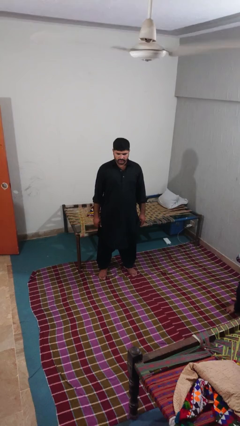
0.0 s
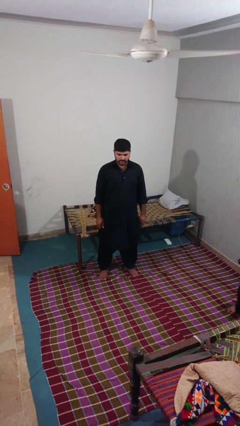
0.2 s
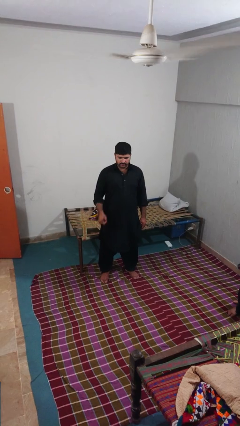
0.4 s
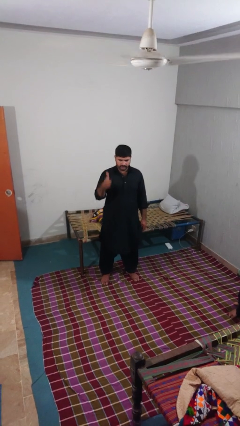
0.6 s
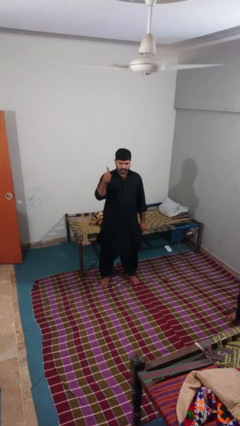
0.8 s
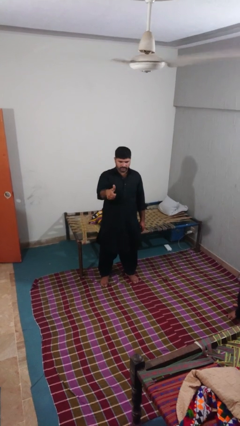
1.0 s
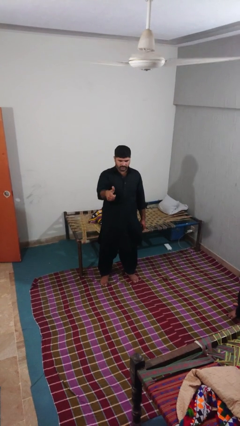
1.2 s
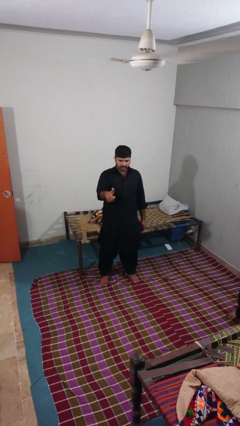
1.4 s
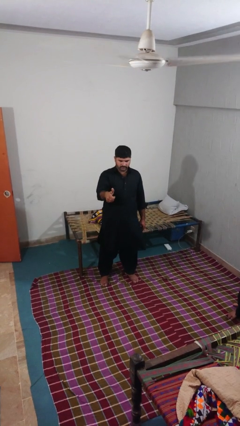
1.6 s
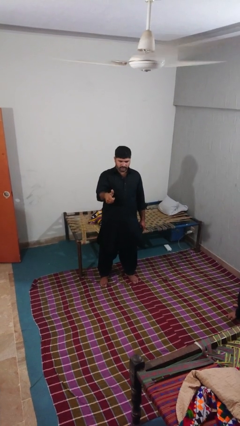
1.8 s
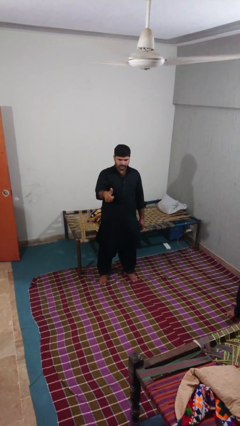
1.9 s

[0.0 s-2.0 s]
person gestures thumbs up

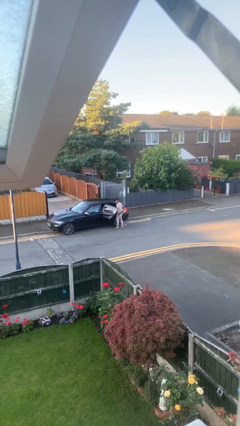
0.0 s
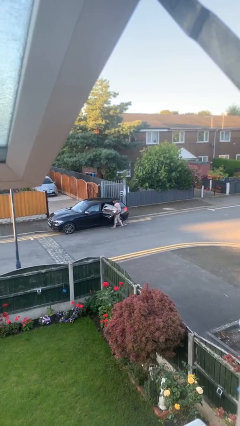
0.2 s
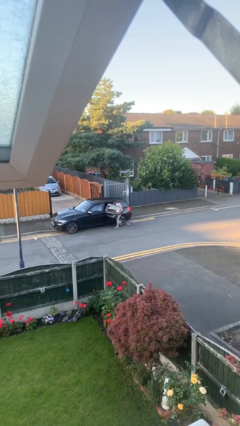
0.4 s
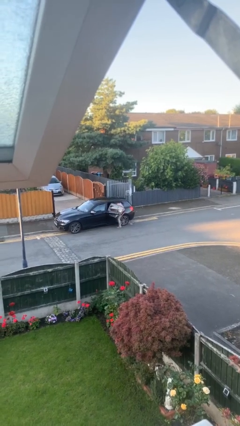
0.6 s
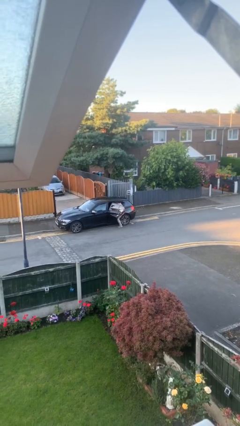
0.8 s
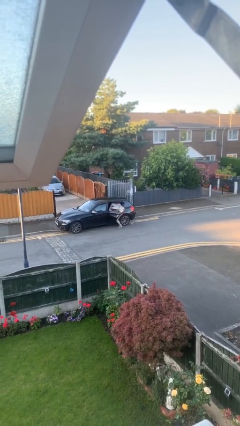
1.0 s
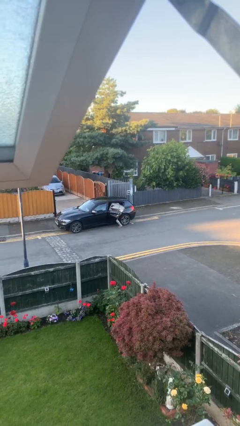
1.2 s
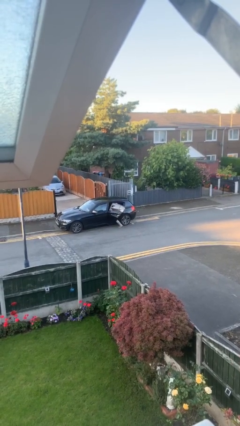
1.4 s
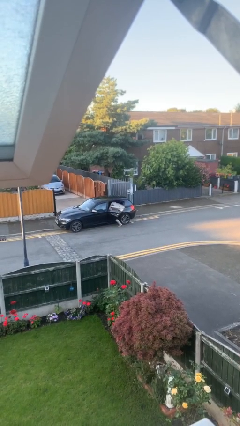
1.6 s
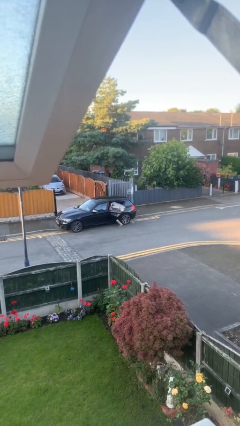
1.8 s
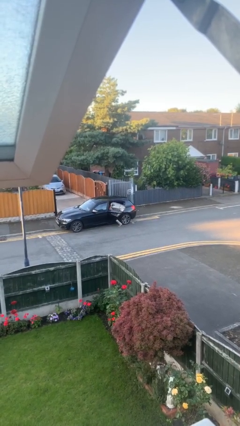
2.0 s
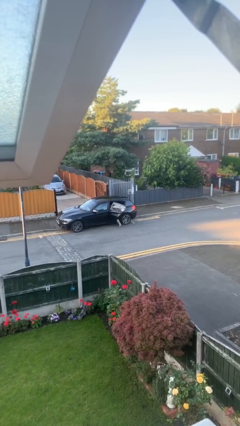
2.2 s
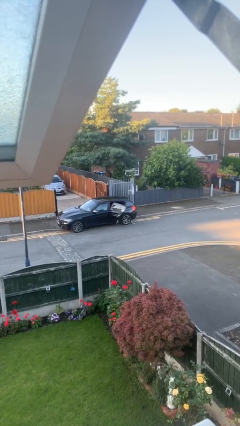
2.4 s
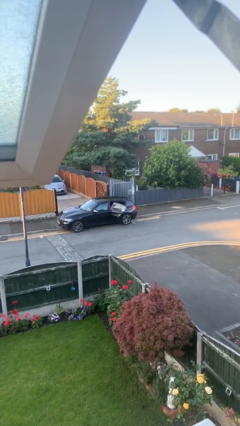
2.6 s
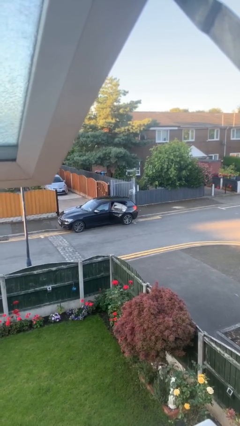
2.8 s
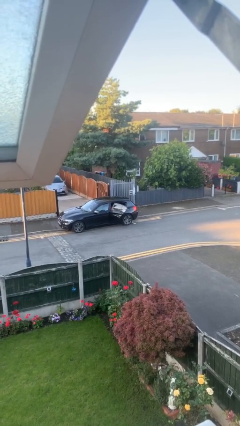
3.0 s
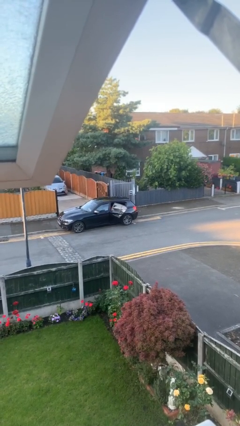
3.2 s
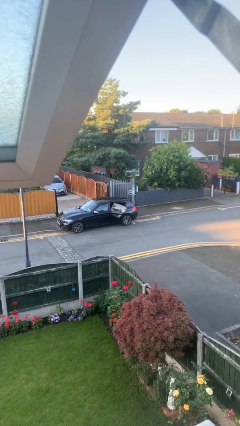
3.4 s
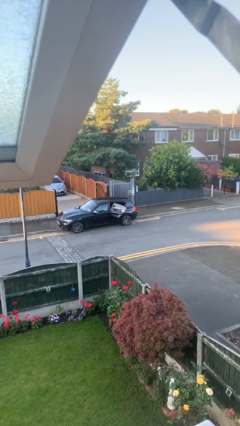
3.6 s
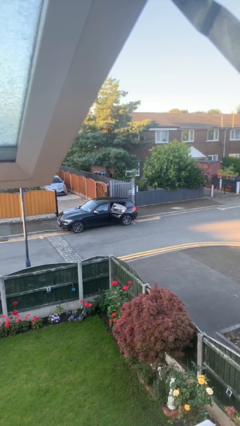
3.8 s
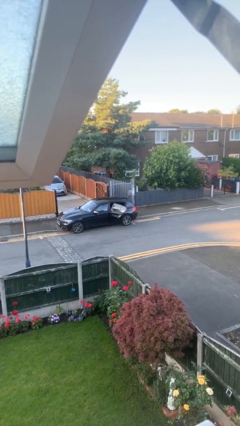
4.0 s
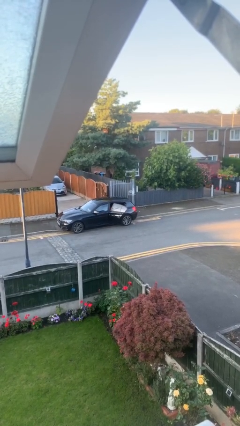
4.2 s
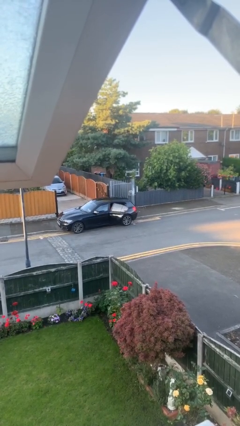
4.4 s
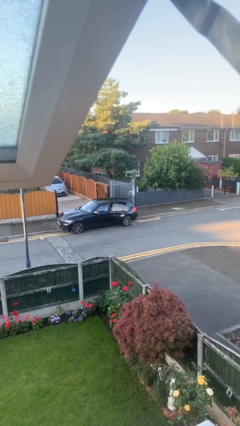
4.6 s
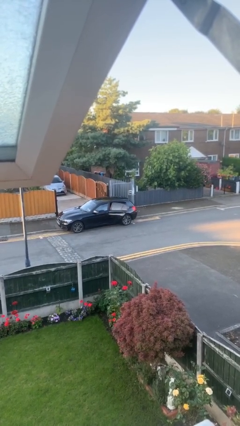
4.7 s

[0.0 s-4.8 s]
person enters car

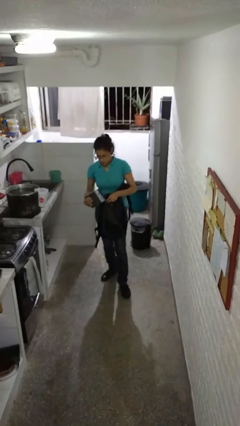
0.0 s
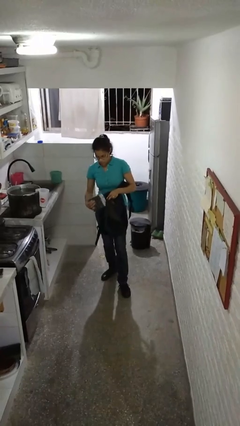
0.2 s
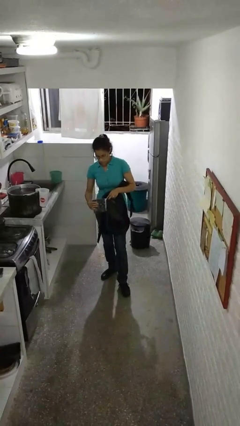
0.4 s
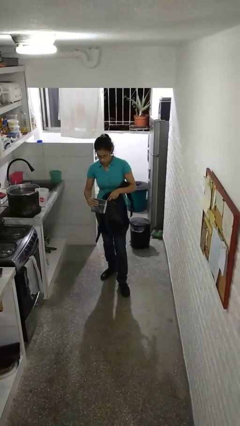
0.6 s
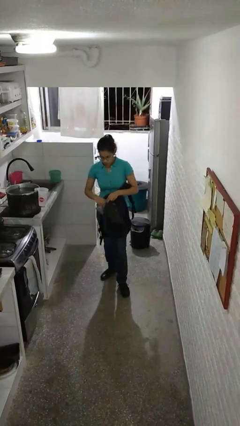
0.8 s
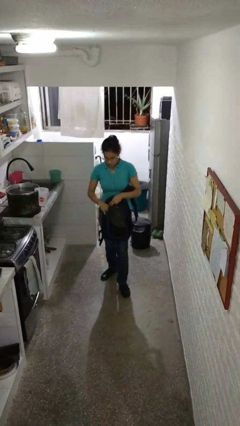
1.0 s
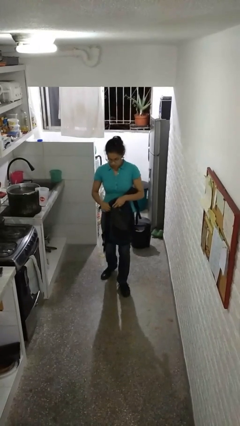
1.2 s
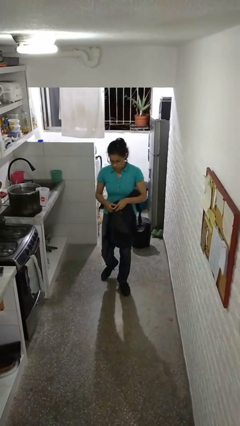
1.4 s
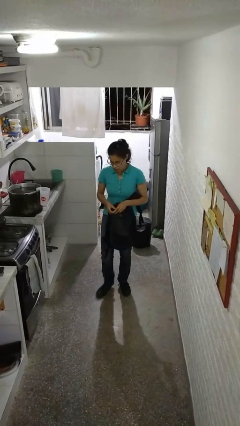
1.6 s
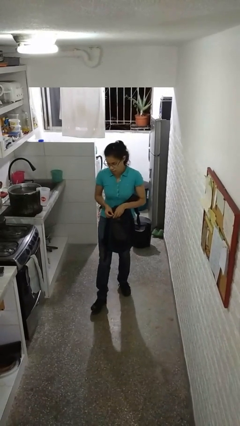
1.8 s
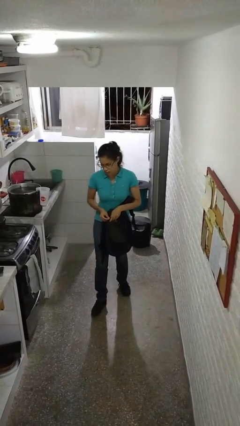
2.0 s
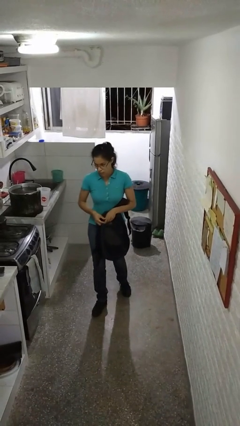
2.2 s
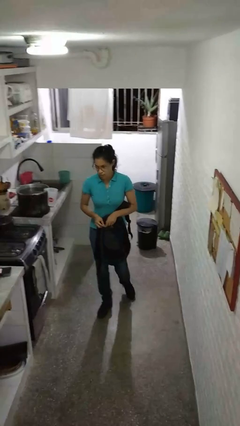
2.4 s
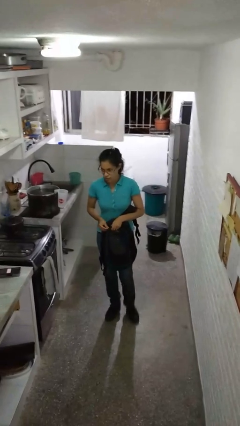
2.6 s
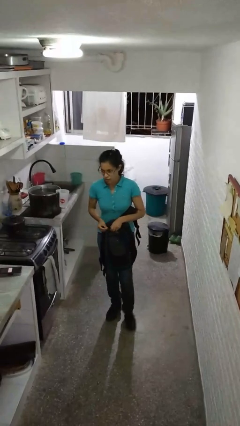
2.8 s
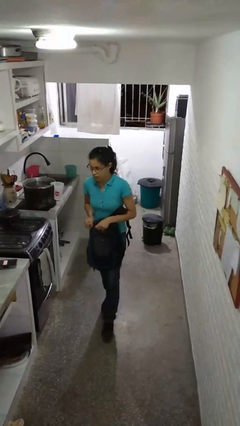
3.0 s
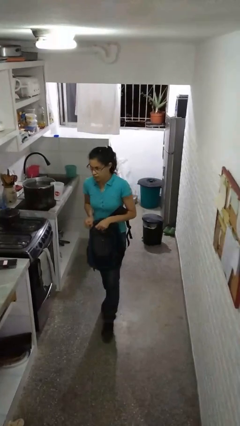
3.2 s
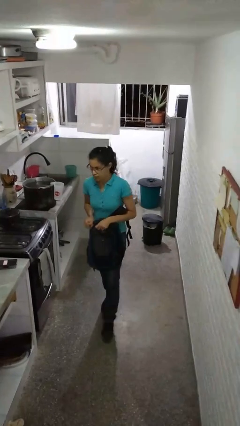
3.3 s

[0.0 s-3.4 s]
person puts object into backpack

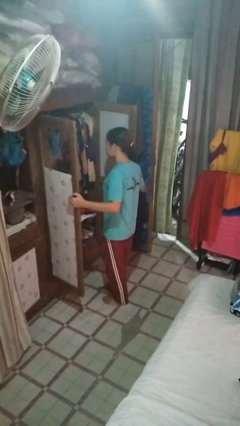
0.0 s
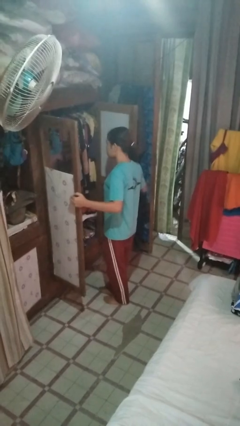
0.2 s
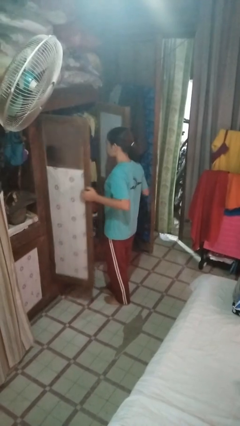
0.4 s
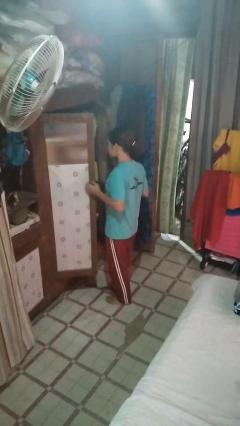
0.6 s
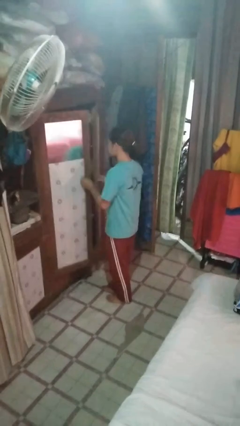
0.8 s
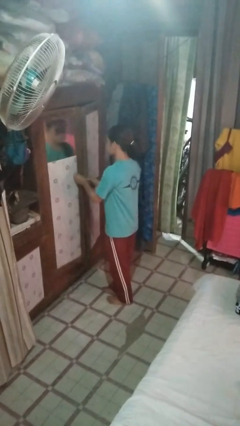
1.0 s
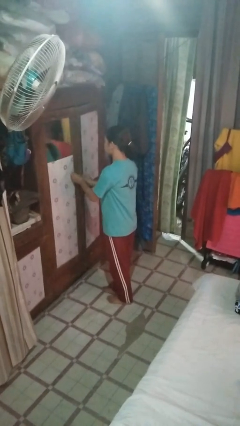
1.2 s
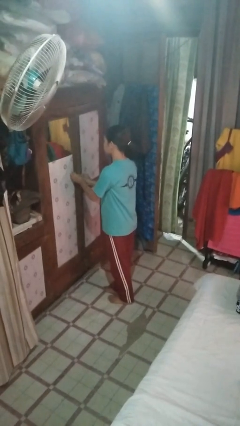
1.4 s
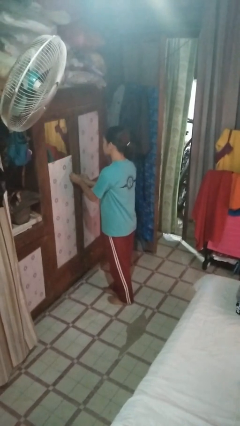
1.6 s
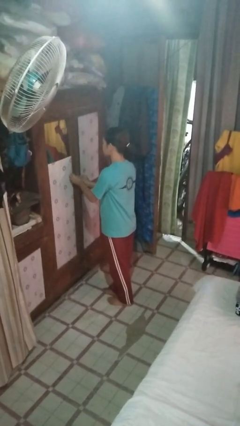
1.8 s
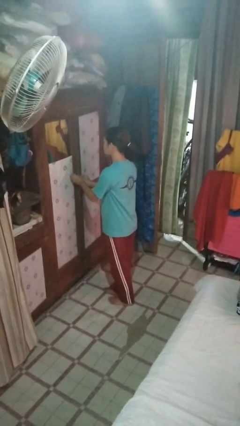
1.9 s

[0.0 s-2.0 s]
person closes closet door

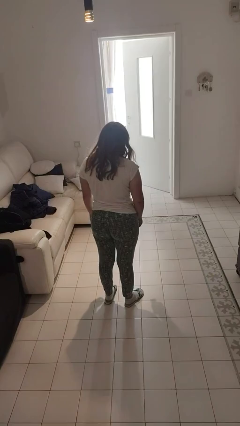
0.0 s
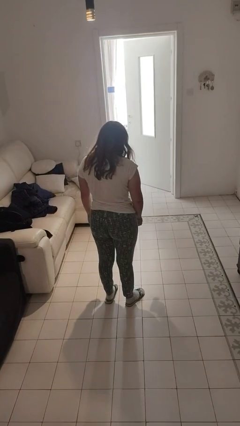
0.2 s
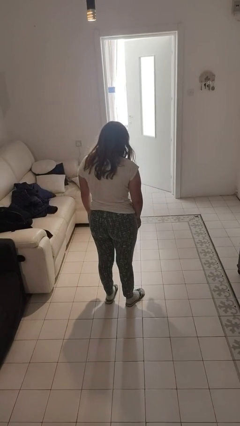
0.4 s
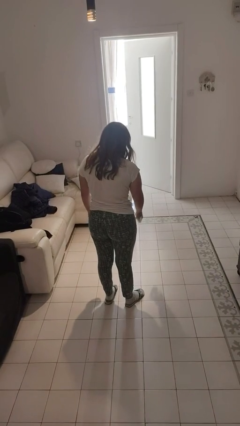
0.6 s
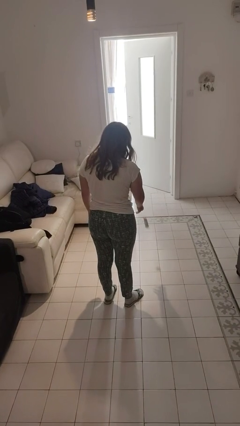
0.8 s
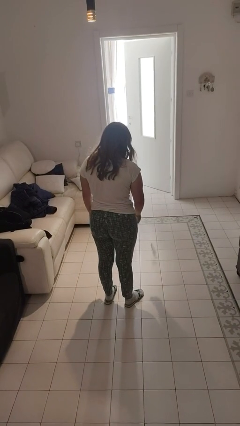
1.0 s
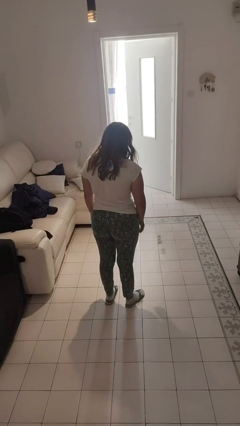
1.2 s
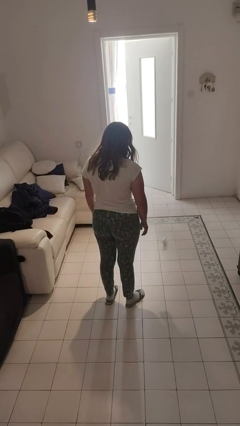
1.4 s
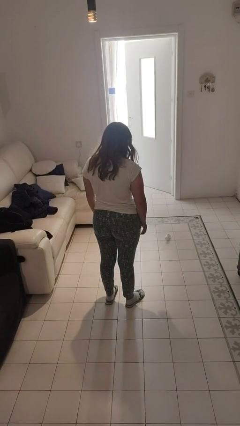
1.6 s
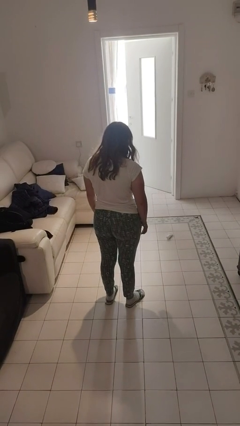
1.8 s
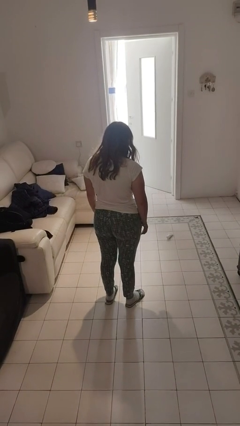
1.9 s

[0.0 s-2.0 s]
person throws object to ground

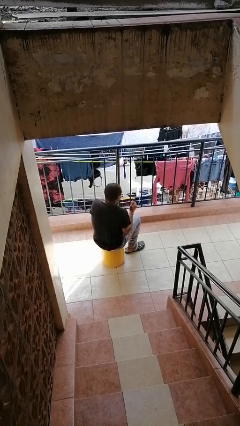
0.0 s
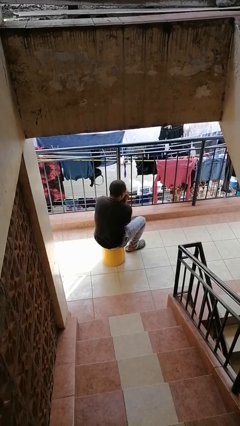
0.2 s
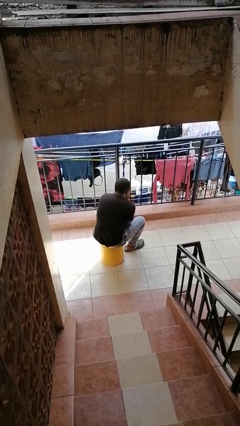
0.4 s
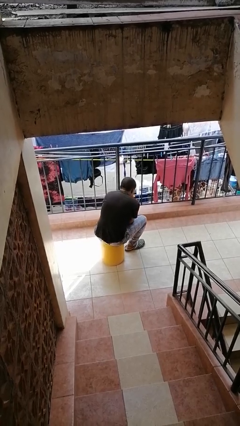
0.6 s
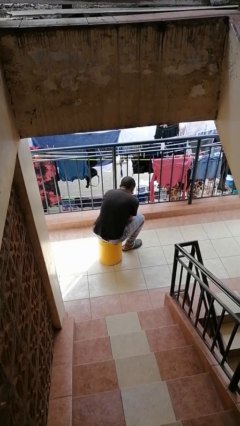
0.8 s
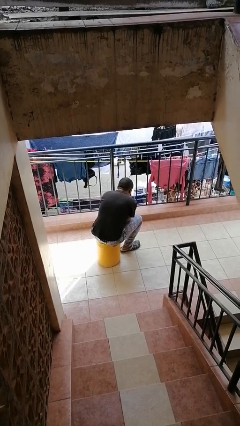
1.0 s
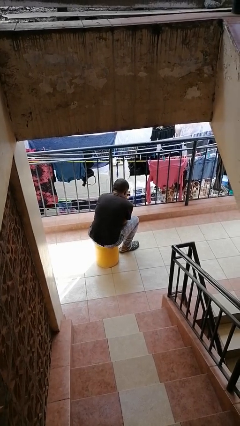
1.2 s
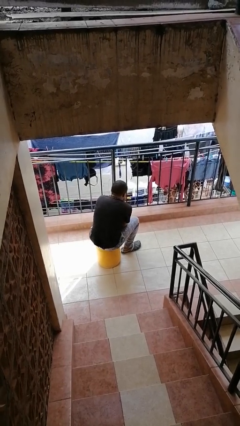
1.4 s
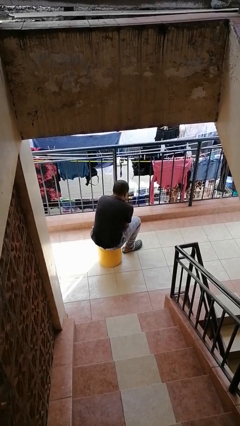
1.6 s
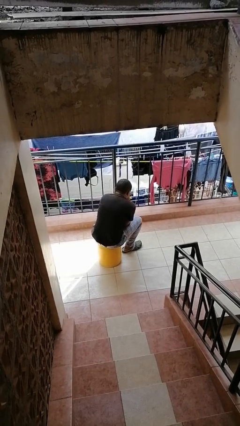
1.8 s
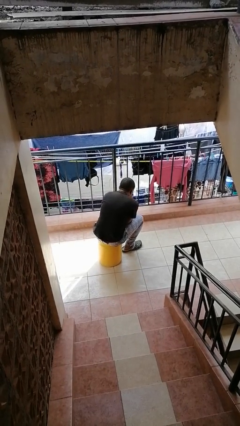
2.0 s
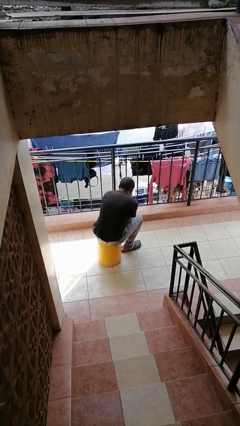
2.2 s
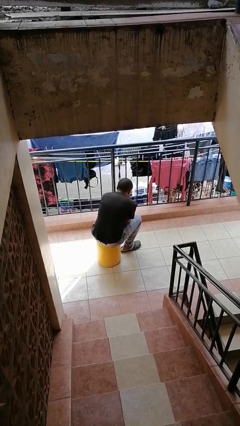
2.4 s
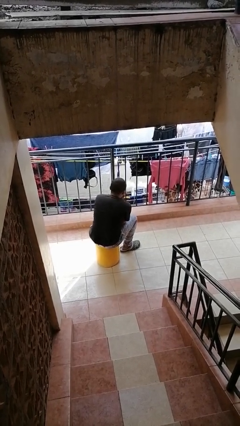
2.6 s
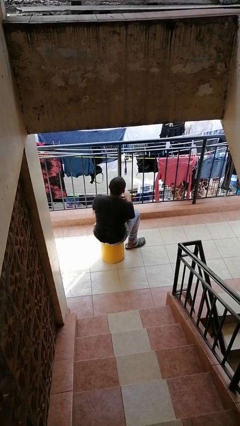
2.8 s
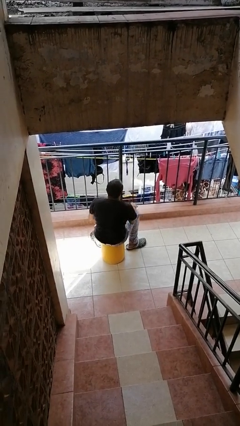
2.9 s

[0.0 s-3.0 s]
person blows into hands
